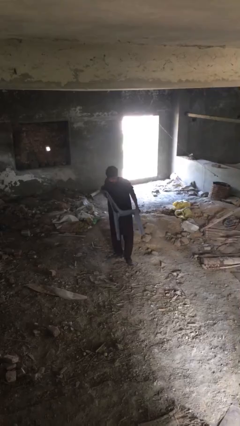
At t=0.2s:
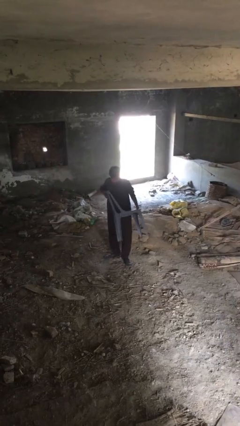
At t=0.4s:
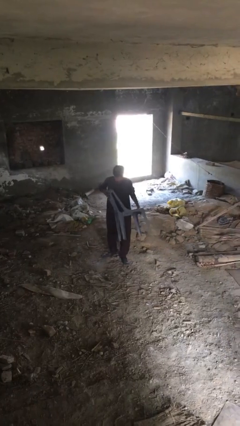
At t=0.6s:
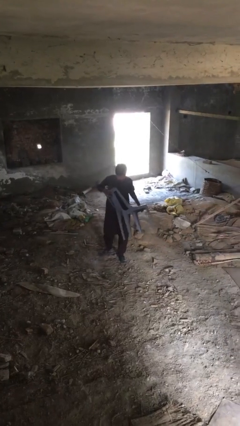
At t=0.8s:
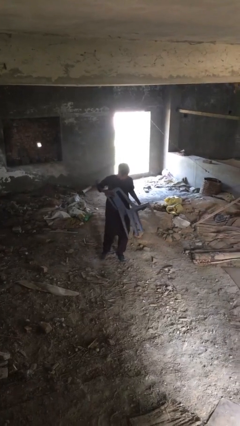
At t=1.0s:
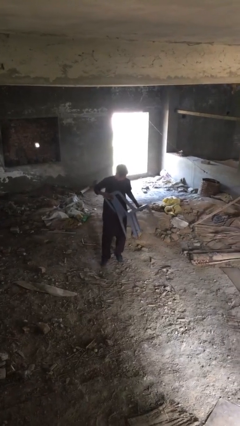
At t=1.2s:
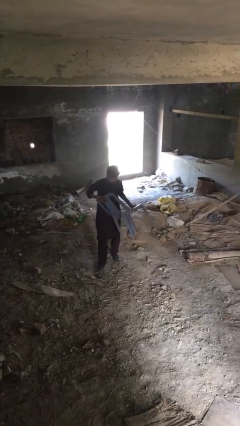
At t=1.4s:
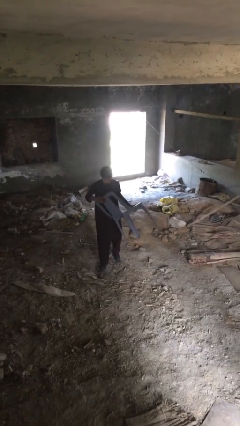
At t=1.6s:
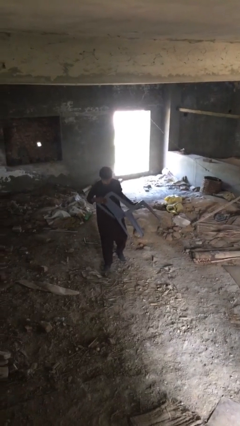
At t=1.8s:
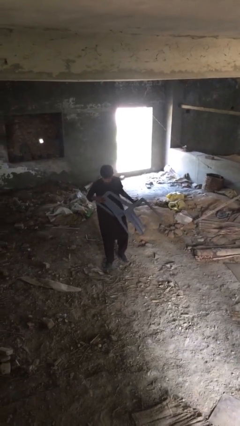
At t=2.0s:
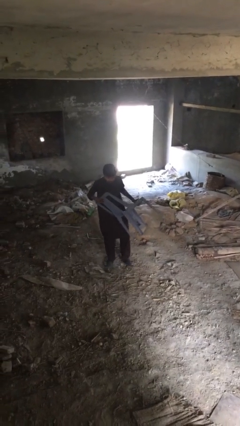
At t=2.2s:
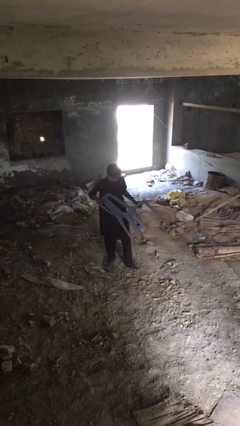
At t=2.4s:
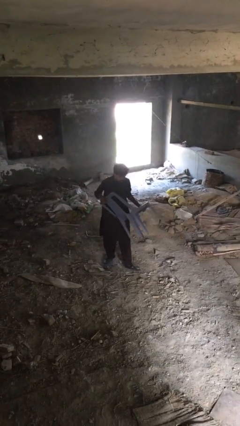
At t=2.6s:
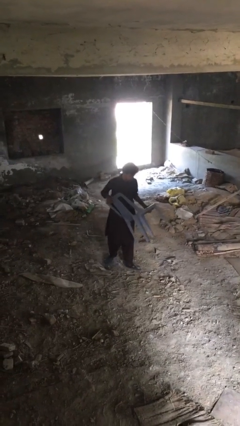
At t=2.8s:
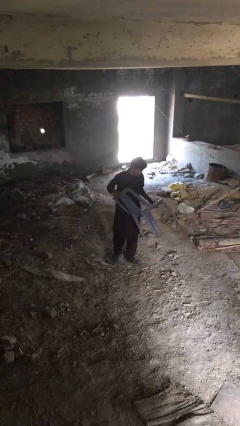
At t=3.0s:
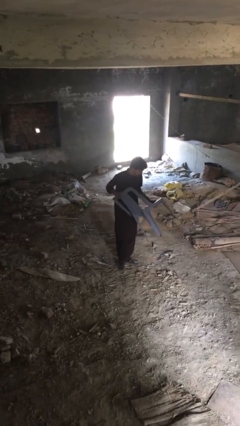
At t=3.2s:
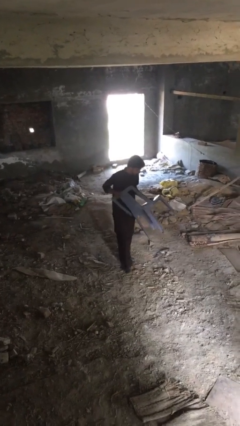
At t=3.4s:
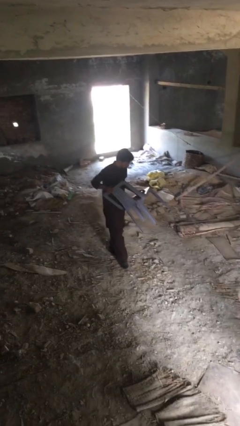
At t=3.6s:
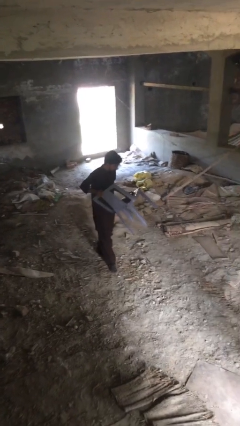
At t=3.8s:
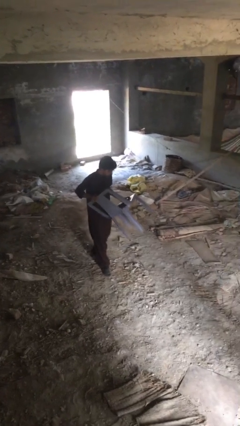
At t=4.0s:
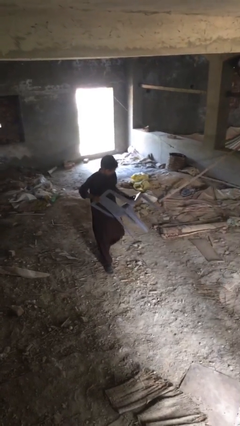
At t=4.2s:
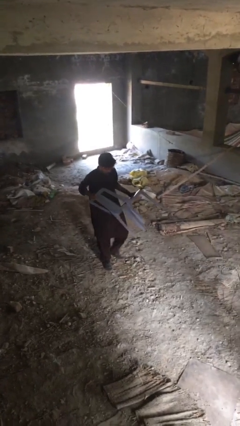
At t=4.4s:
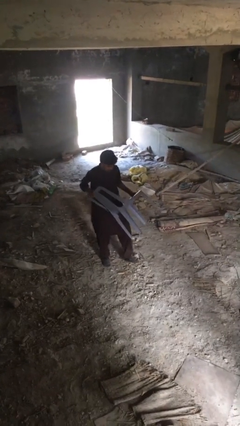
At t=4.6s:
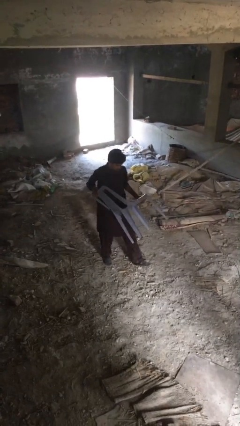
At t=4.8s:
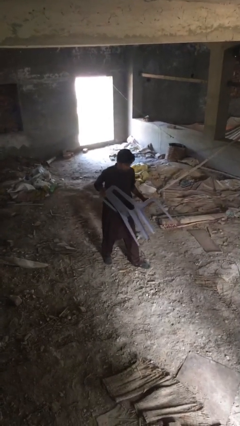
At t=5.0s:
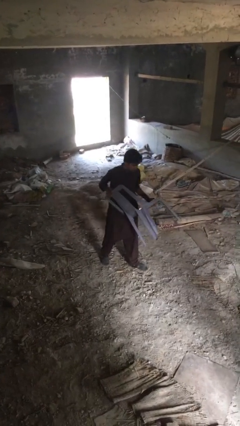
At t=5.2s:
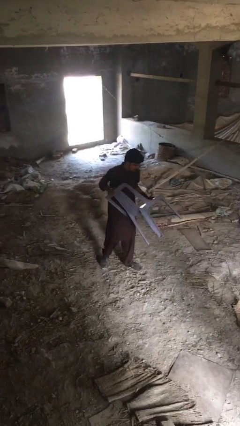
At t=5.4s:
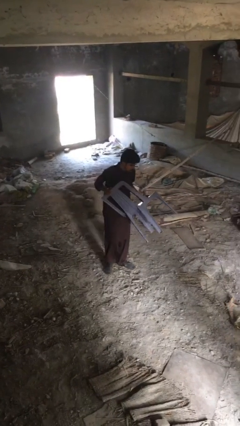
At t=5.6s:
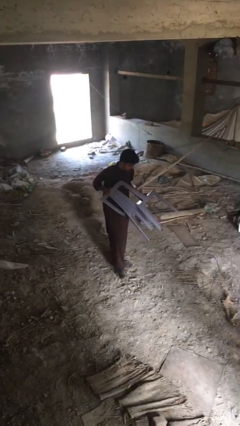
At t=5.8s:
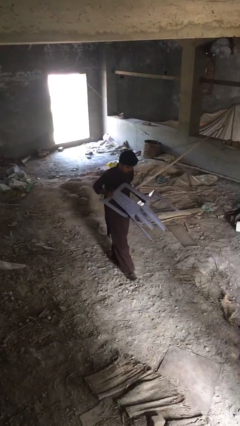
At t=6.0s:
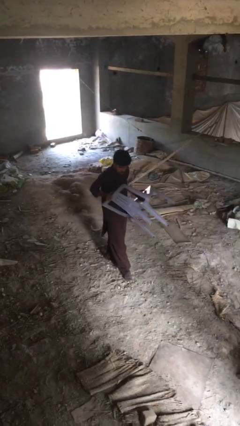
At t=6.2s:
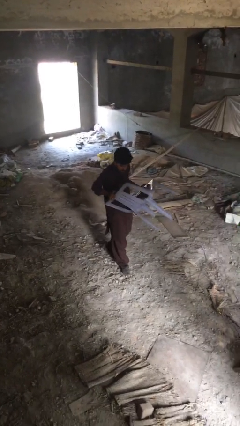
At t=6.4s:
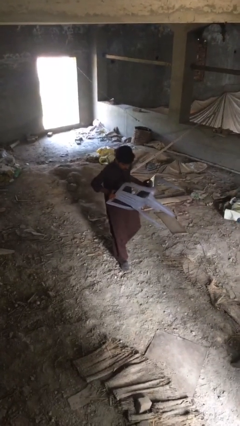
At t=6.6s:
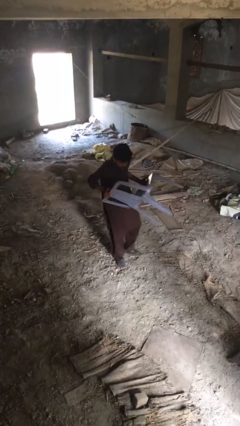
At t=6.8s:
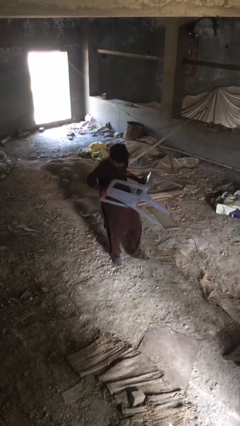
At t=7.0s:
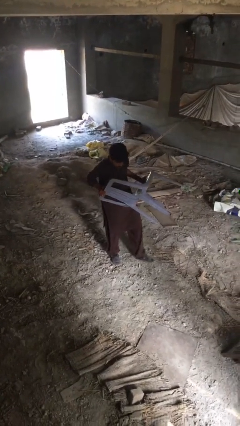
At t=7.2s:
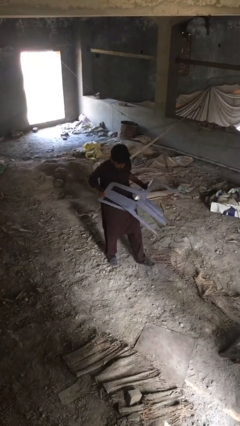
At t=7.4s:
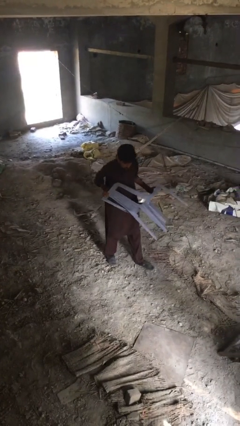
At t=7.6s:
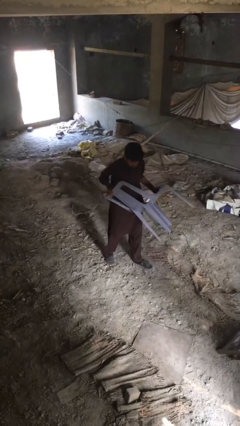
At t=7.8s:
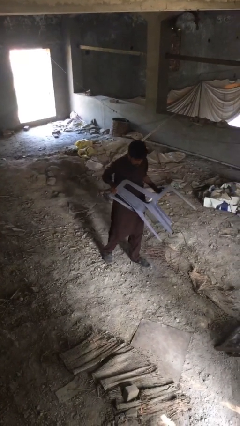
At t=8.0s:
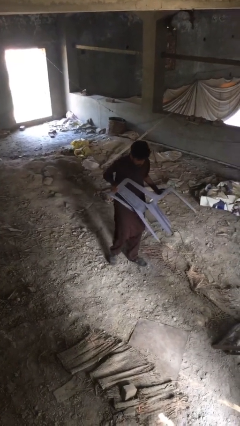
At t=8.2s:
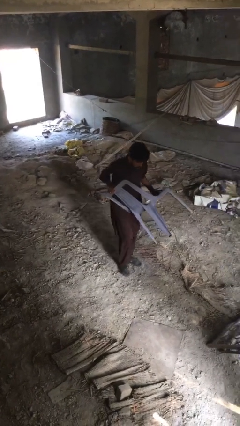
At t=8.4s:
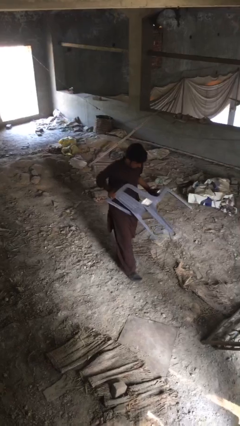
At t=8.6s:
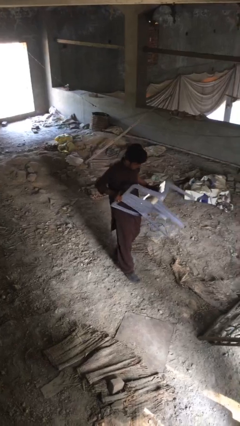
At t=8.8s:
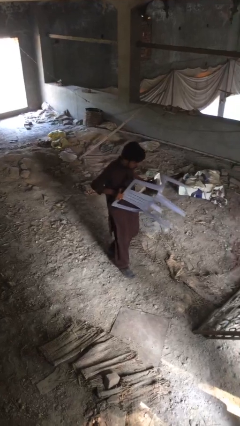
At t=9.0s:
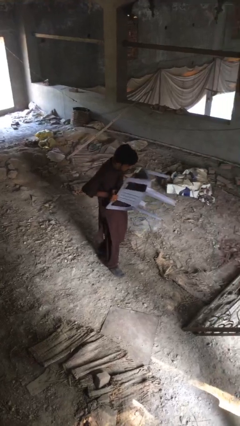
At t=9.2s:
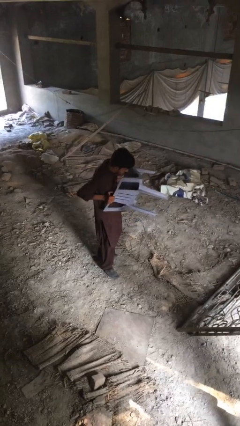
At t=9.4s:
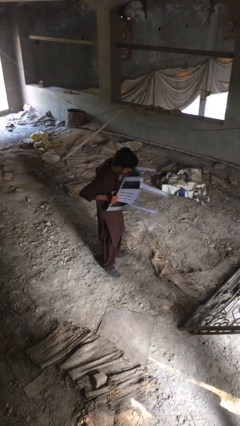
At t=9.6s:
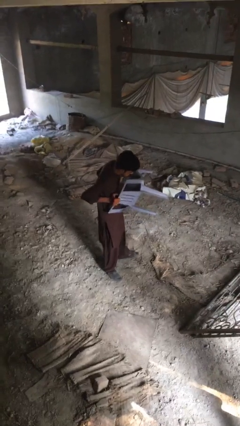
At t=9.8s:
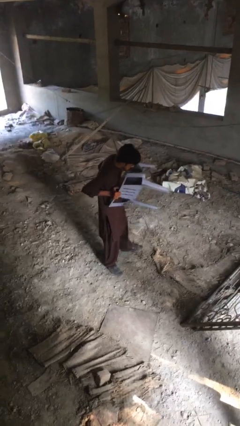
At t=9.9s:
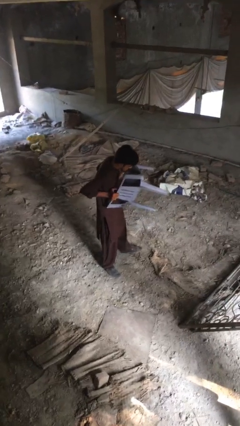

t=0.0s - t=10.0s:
person carries heavy object

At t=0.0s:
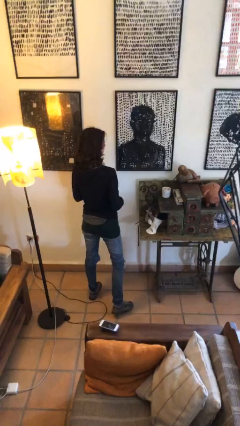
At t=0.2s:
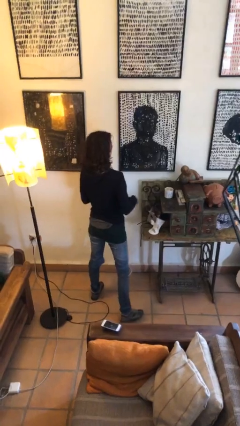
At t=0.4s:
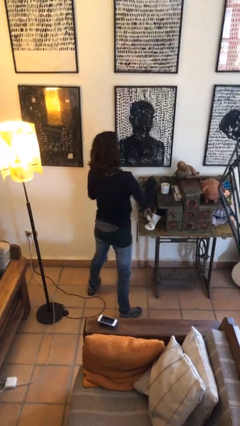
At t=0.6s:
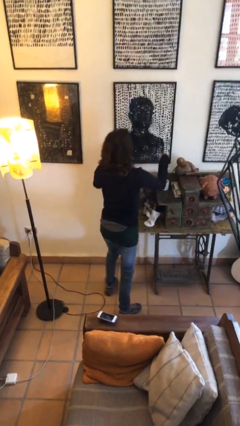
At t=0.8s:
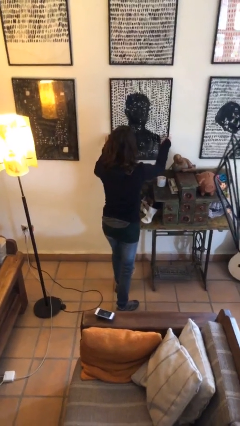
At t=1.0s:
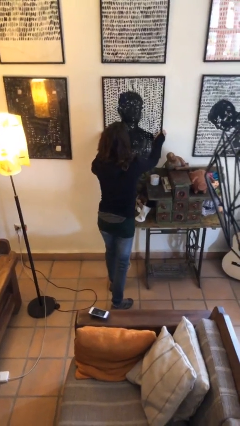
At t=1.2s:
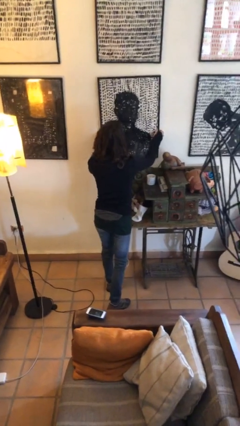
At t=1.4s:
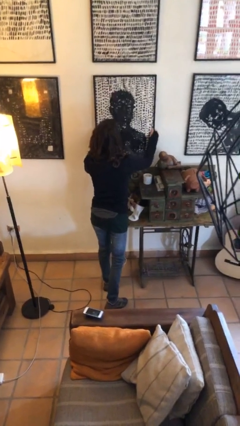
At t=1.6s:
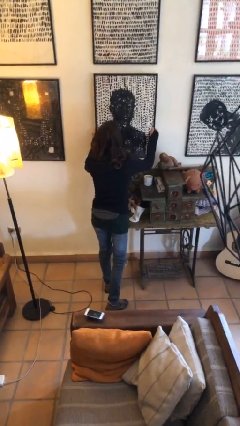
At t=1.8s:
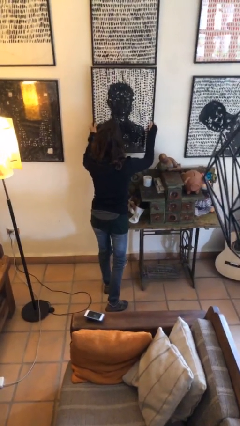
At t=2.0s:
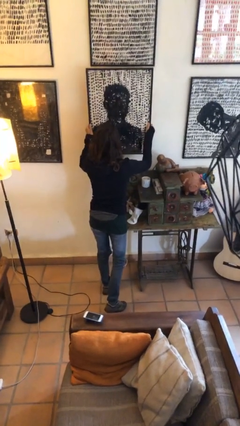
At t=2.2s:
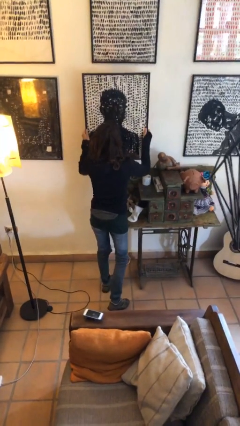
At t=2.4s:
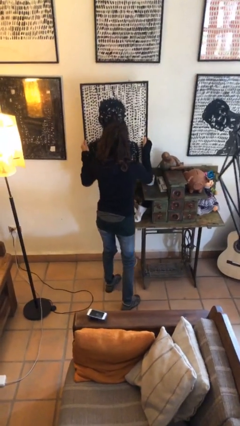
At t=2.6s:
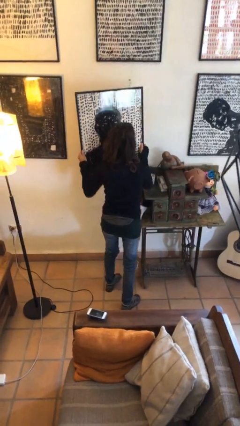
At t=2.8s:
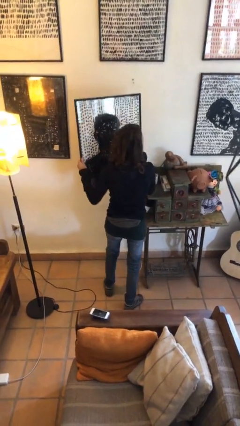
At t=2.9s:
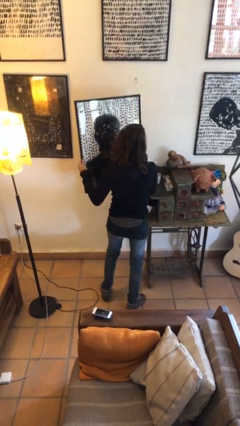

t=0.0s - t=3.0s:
person takes down picture frame

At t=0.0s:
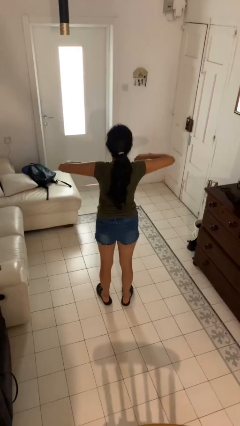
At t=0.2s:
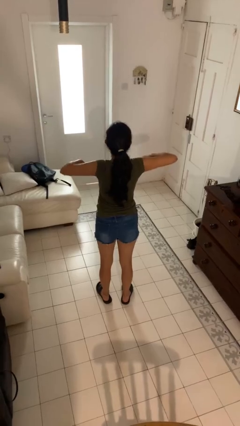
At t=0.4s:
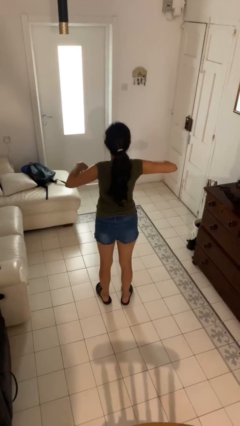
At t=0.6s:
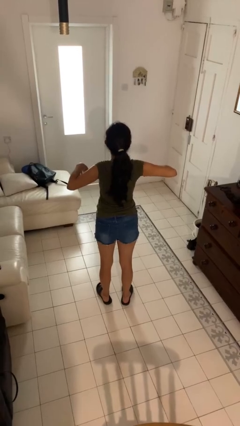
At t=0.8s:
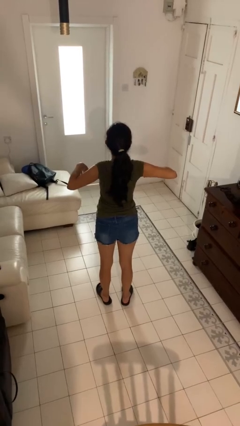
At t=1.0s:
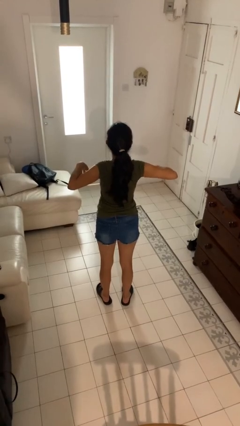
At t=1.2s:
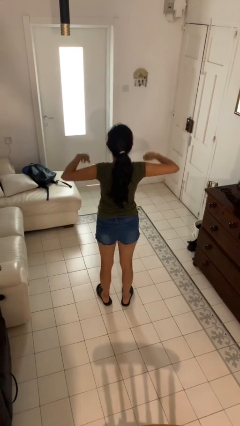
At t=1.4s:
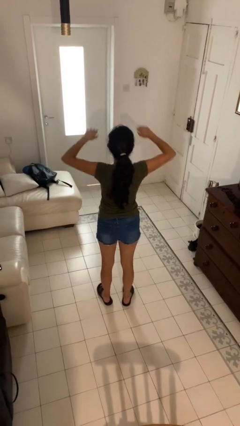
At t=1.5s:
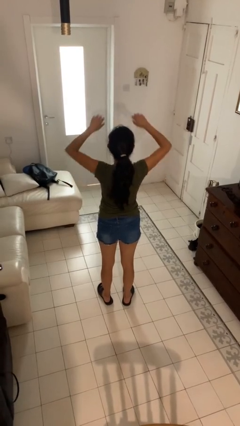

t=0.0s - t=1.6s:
person stretches arms to side

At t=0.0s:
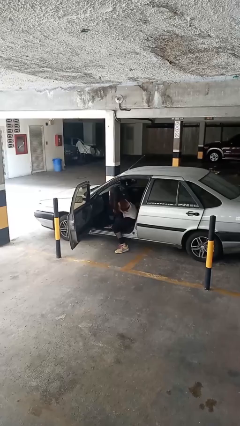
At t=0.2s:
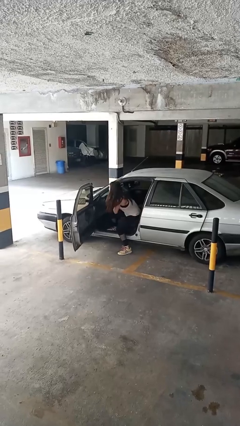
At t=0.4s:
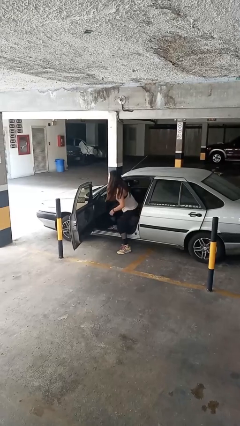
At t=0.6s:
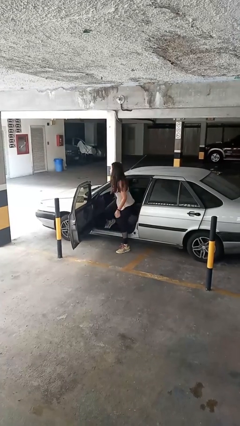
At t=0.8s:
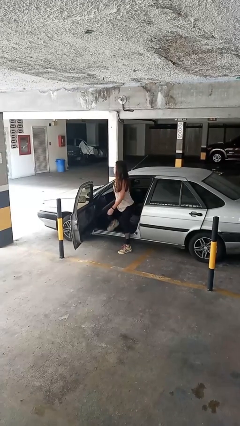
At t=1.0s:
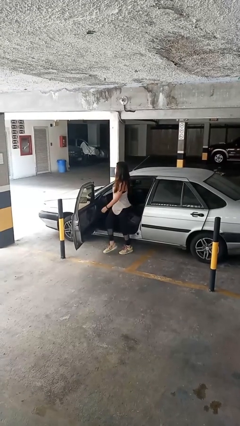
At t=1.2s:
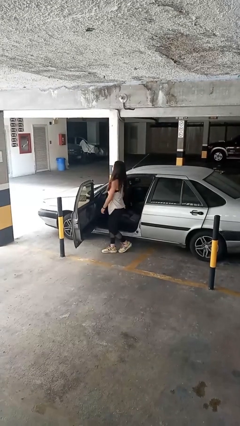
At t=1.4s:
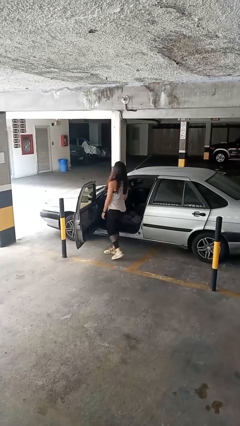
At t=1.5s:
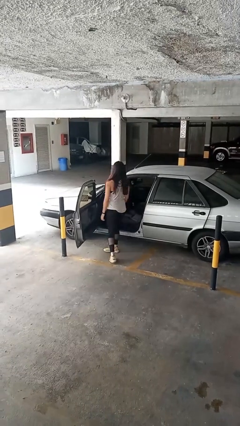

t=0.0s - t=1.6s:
person exits car

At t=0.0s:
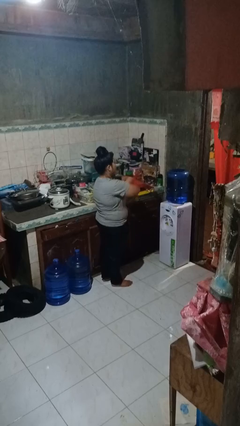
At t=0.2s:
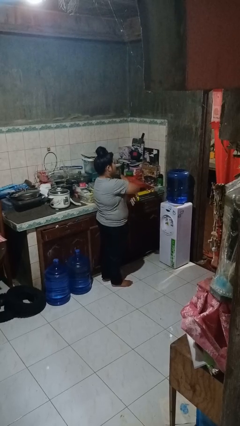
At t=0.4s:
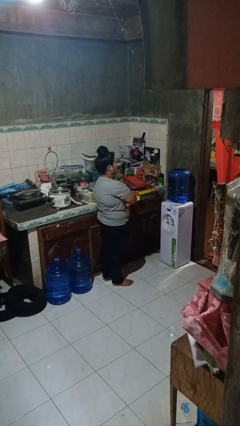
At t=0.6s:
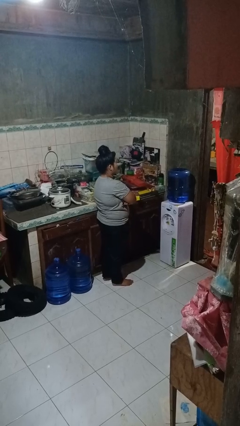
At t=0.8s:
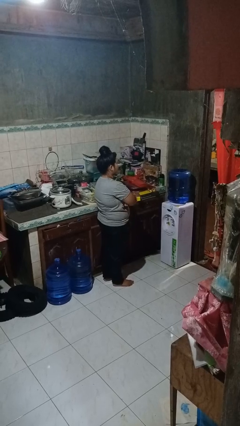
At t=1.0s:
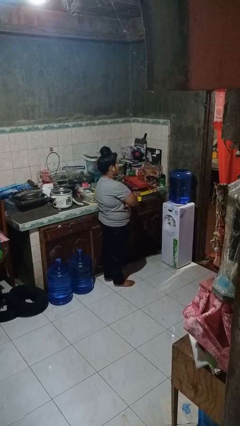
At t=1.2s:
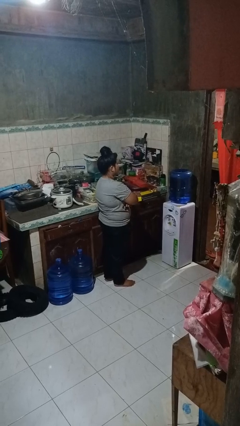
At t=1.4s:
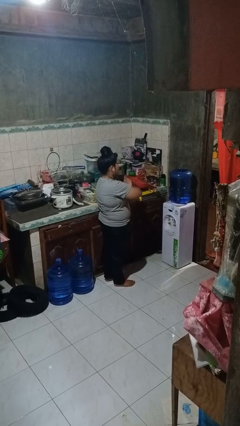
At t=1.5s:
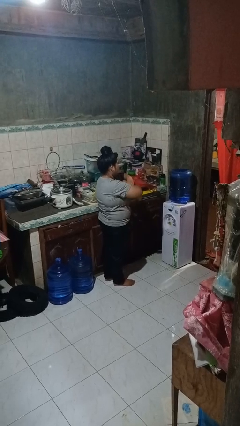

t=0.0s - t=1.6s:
person crosses arms
